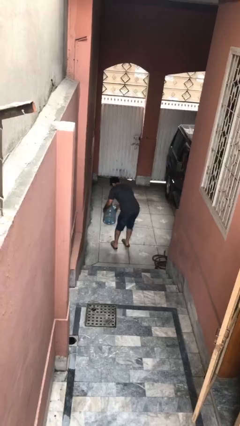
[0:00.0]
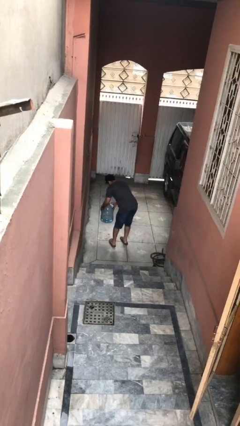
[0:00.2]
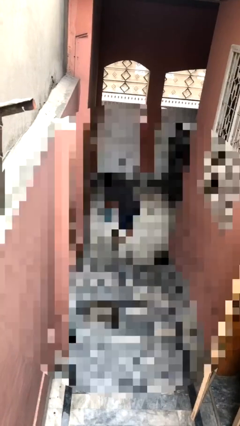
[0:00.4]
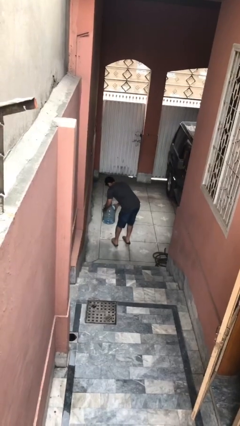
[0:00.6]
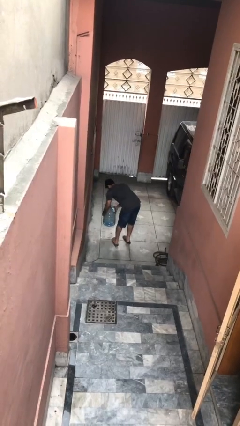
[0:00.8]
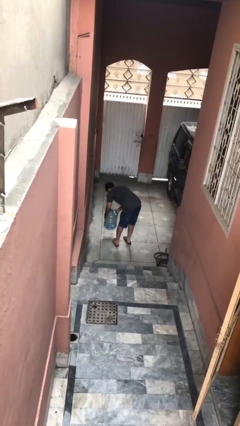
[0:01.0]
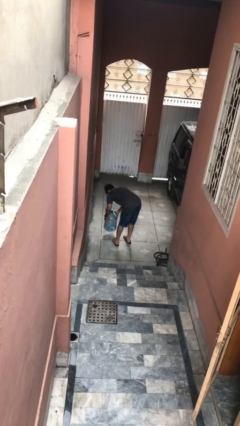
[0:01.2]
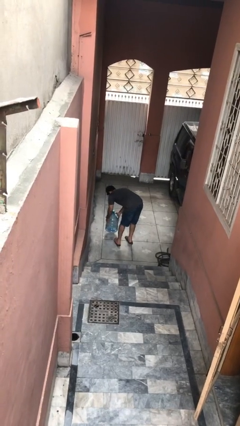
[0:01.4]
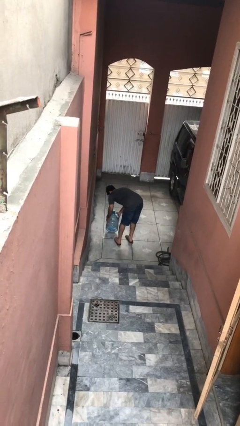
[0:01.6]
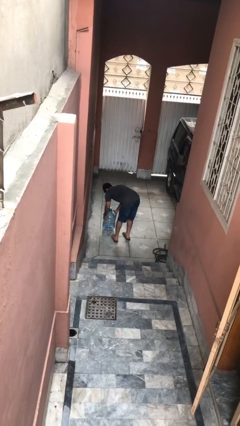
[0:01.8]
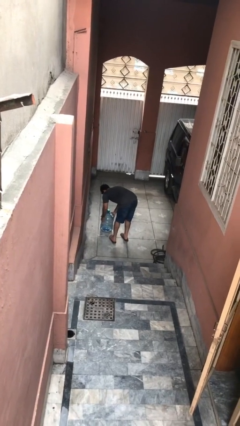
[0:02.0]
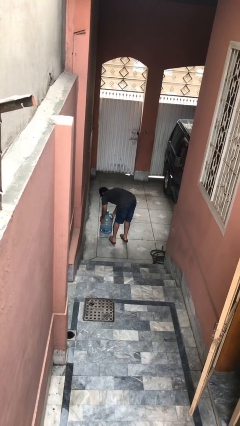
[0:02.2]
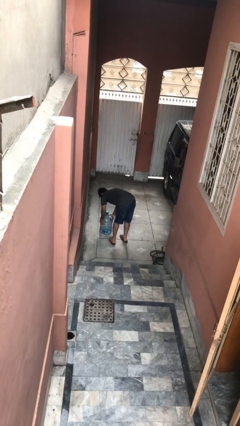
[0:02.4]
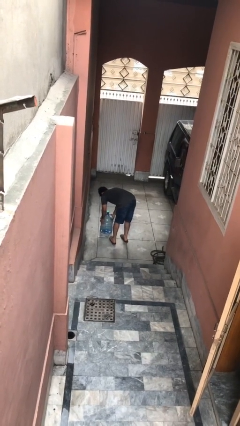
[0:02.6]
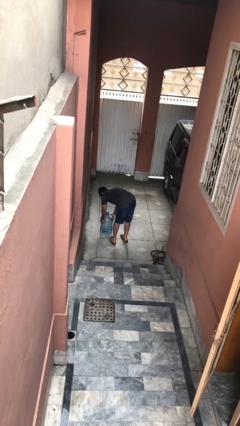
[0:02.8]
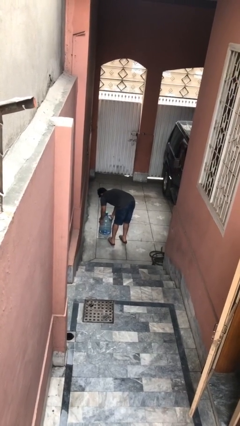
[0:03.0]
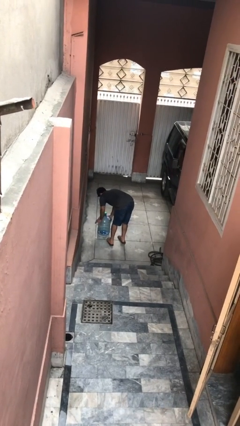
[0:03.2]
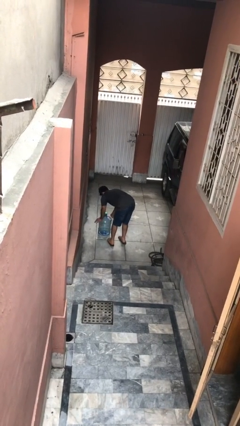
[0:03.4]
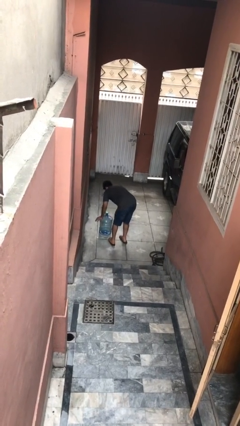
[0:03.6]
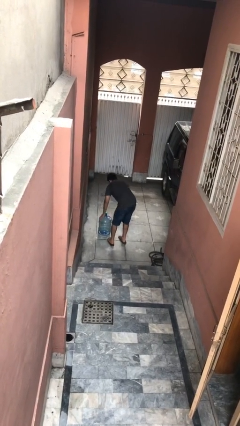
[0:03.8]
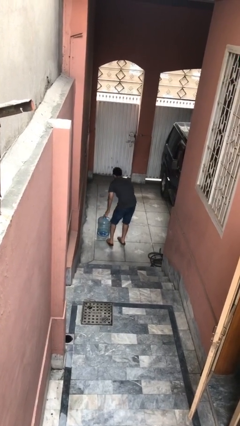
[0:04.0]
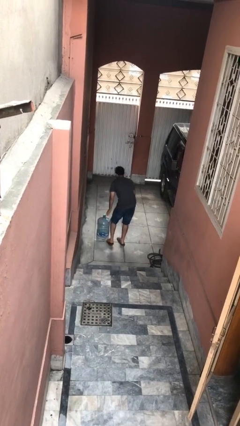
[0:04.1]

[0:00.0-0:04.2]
person puts down object on floor

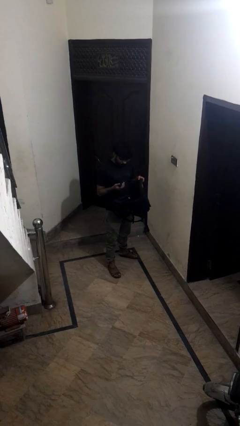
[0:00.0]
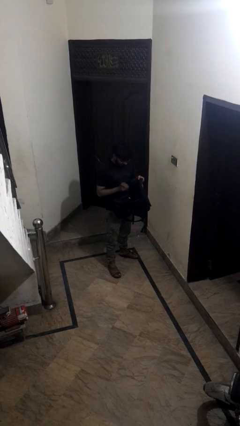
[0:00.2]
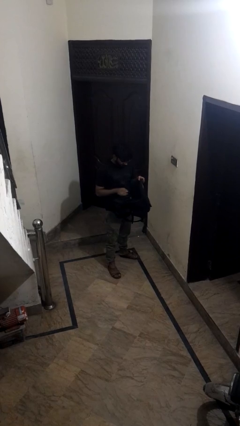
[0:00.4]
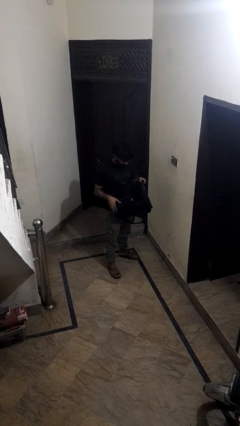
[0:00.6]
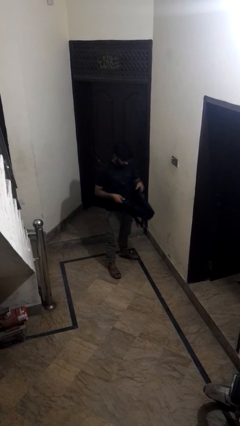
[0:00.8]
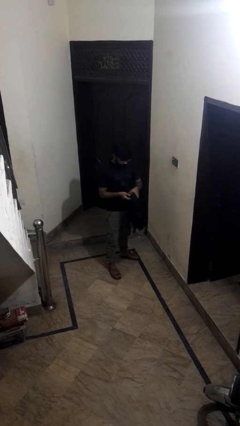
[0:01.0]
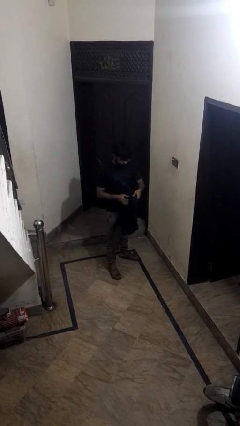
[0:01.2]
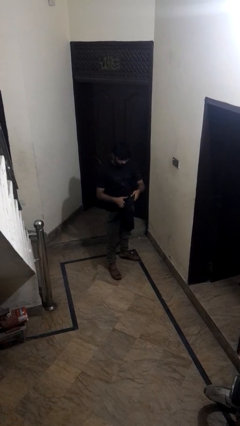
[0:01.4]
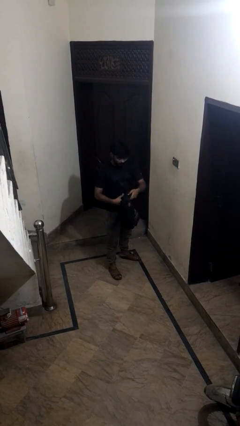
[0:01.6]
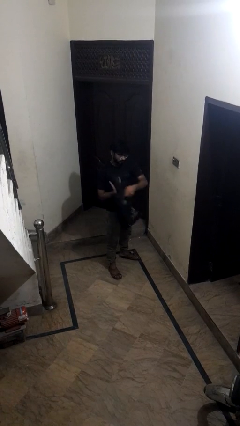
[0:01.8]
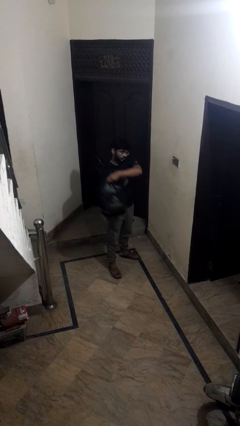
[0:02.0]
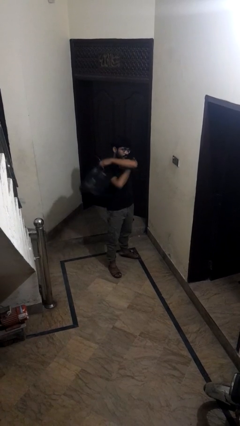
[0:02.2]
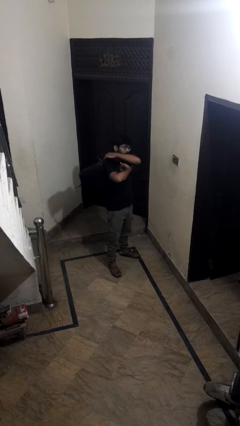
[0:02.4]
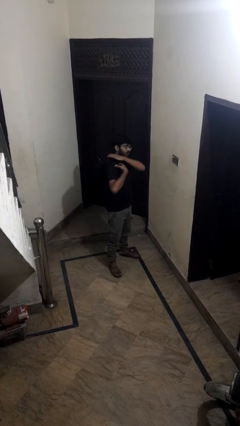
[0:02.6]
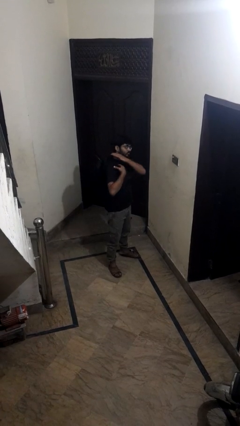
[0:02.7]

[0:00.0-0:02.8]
person puts object into backpack

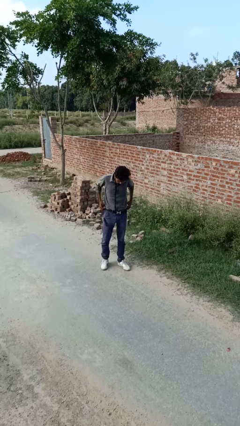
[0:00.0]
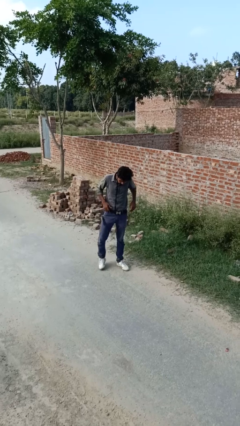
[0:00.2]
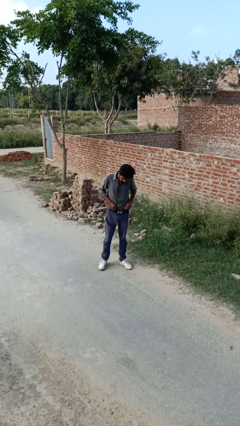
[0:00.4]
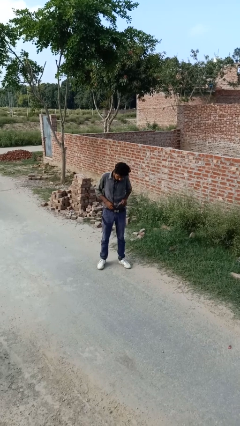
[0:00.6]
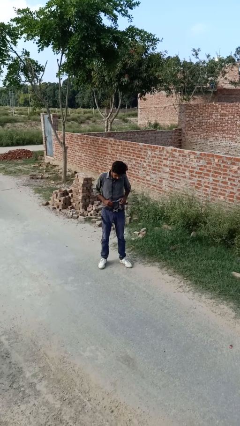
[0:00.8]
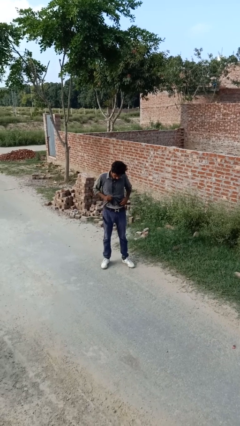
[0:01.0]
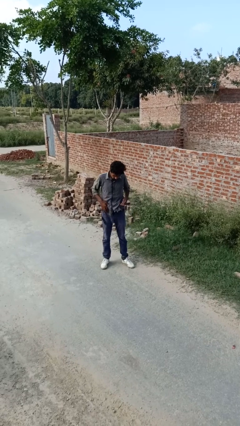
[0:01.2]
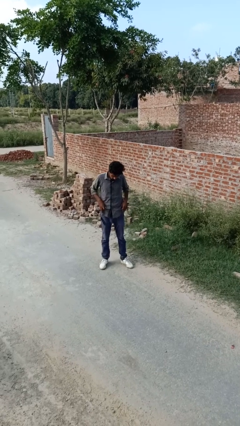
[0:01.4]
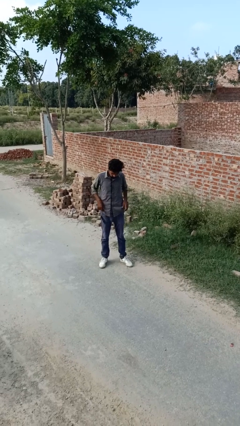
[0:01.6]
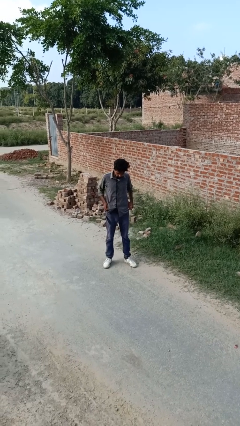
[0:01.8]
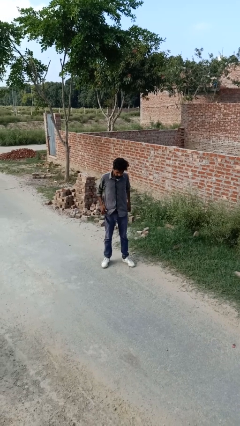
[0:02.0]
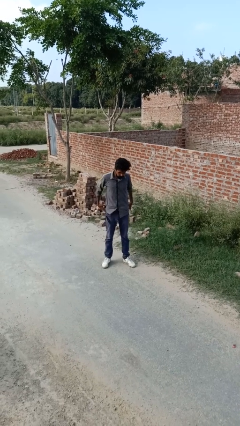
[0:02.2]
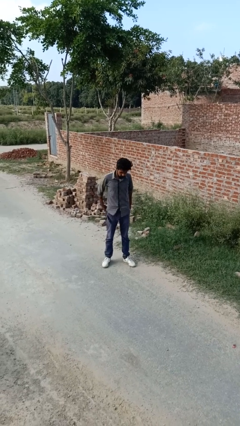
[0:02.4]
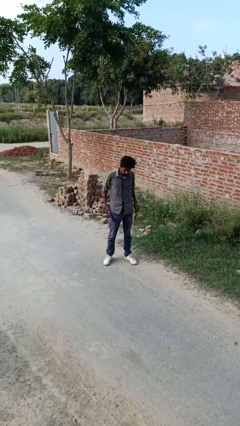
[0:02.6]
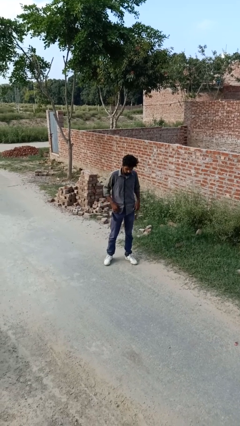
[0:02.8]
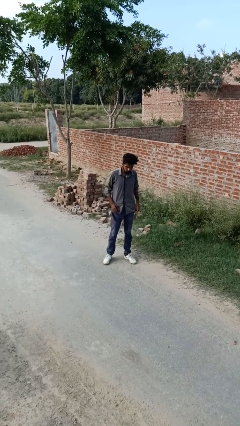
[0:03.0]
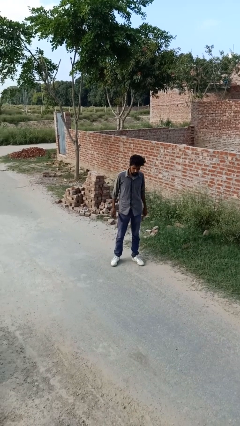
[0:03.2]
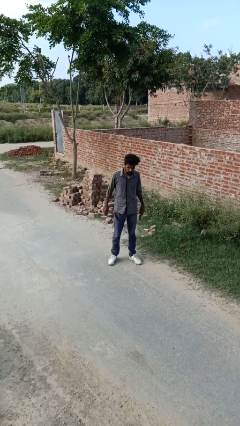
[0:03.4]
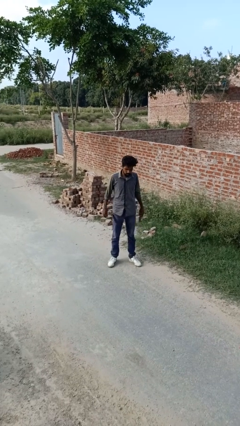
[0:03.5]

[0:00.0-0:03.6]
person untucks shirt

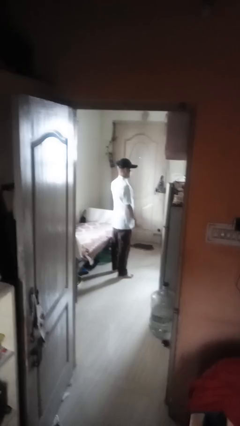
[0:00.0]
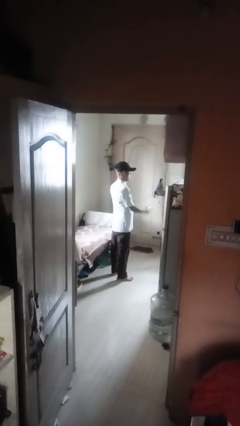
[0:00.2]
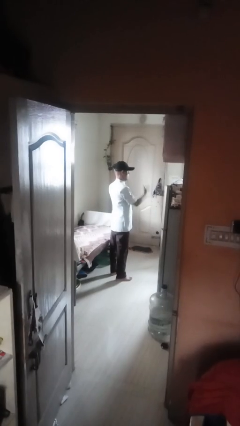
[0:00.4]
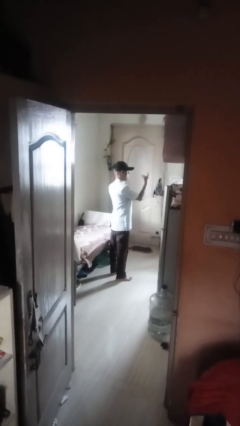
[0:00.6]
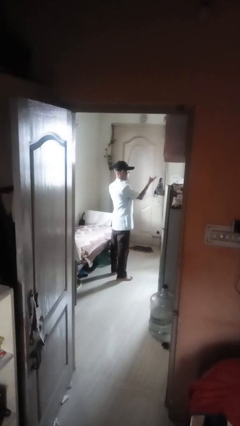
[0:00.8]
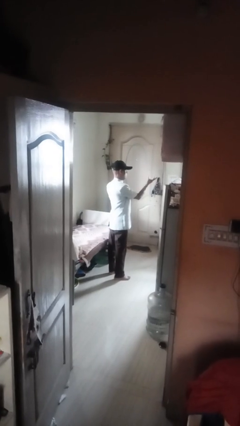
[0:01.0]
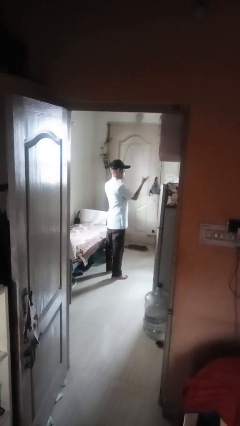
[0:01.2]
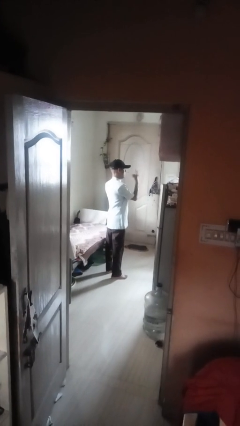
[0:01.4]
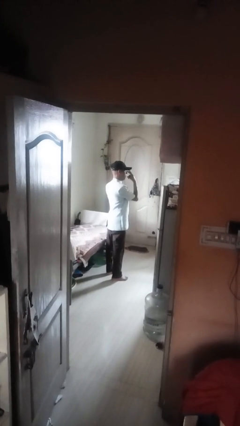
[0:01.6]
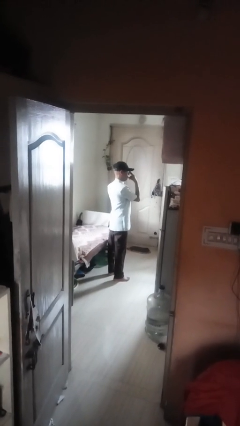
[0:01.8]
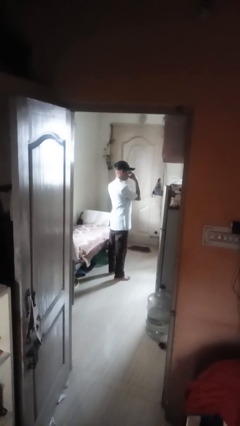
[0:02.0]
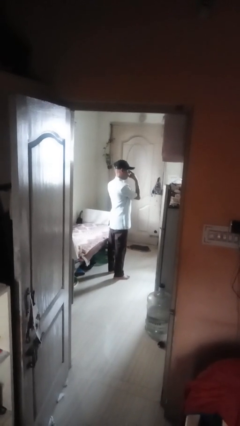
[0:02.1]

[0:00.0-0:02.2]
person gestures watch closely

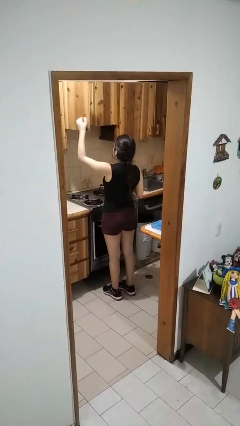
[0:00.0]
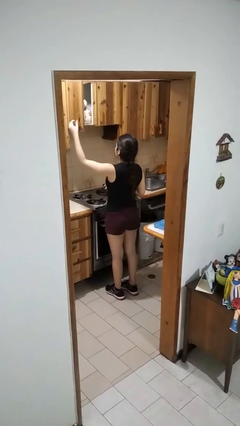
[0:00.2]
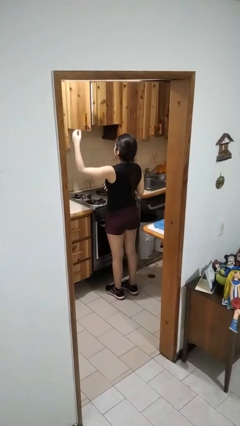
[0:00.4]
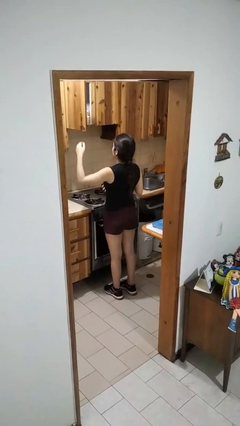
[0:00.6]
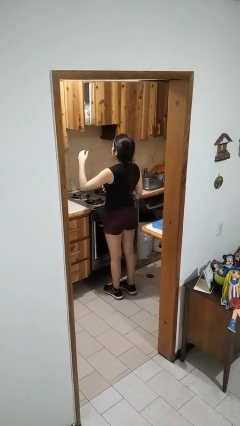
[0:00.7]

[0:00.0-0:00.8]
person opens cabinet

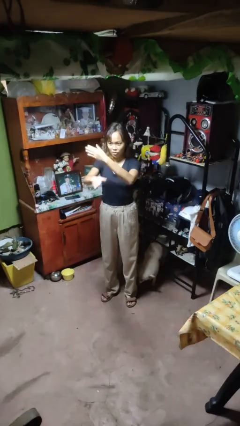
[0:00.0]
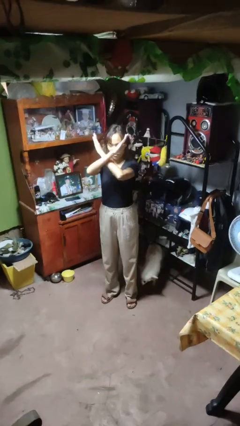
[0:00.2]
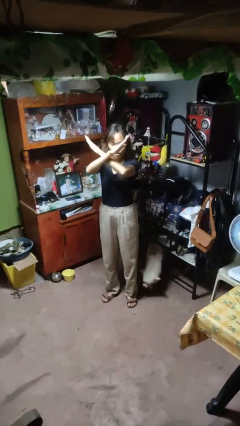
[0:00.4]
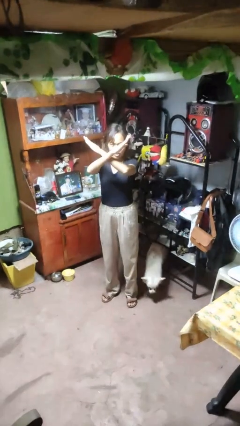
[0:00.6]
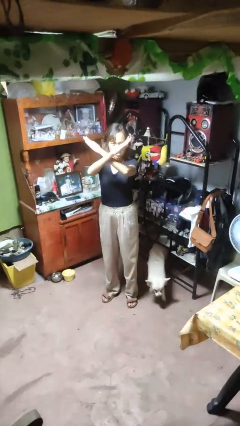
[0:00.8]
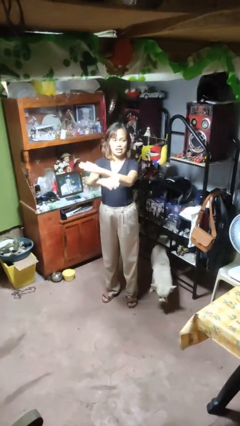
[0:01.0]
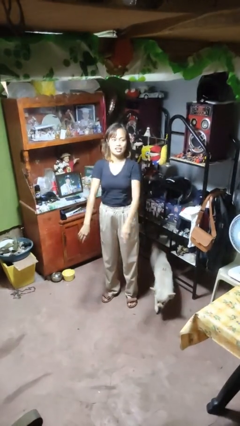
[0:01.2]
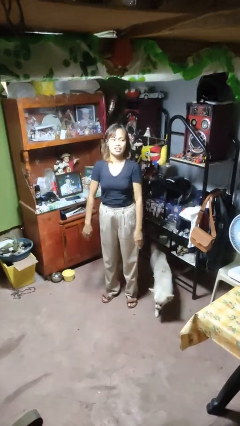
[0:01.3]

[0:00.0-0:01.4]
person gestures arms x

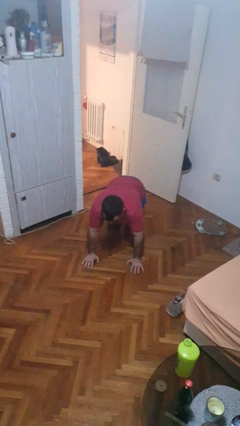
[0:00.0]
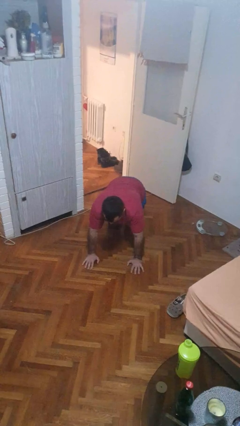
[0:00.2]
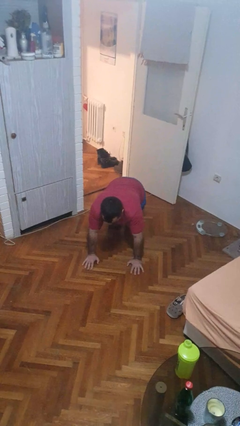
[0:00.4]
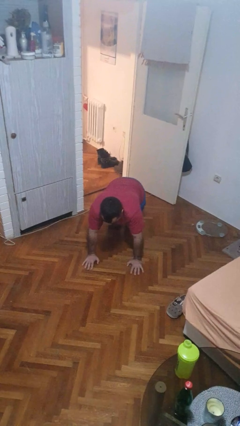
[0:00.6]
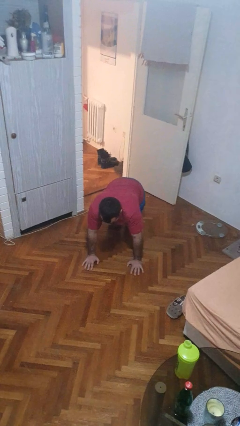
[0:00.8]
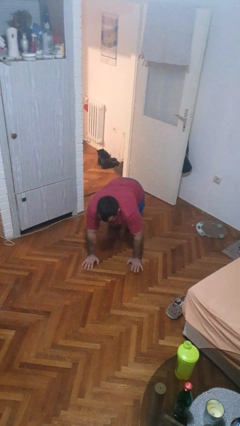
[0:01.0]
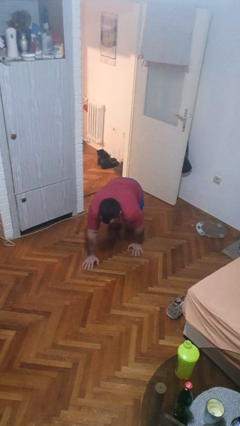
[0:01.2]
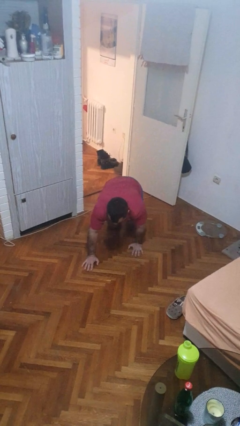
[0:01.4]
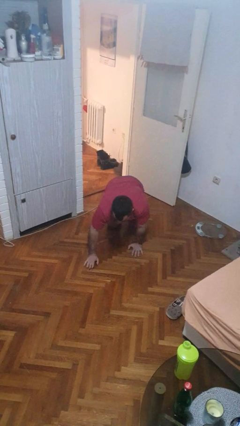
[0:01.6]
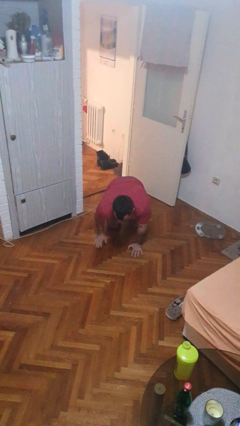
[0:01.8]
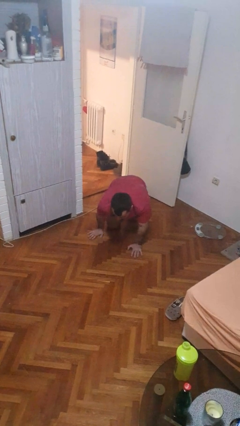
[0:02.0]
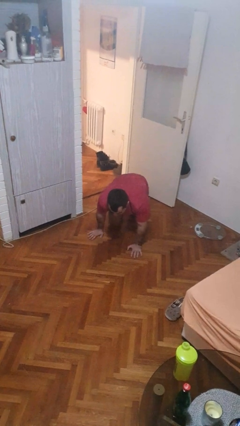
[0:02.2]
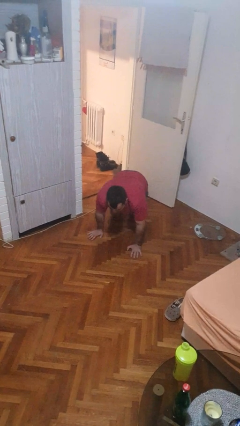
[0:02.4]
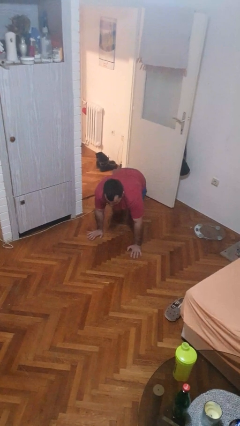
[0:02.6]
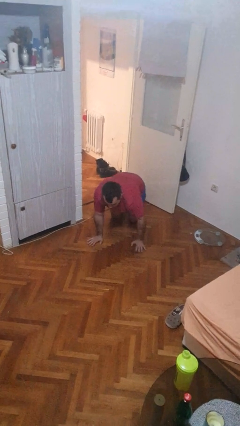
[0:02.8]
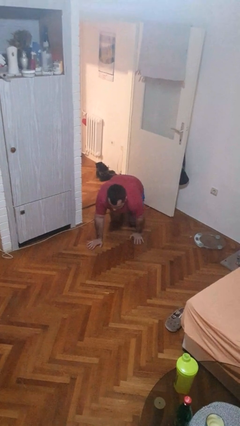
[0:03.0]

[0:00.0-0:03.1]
person crawls
